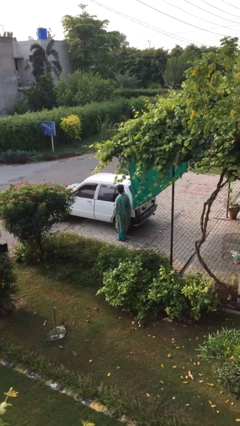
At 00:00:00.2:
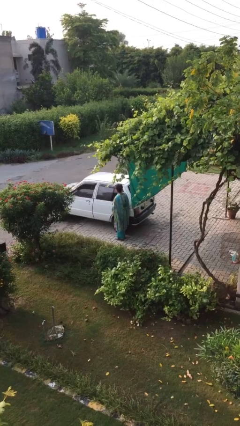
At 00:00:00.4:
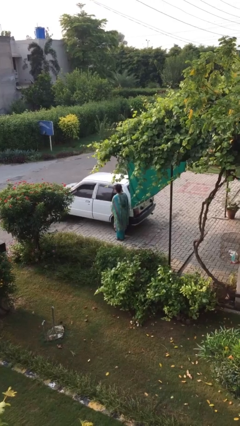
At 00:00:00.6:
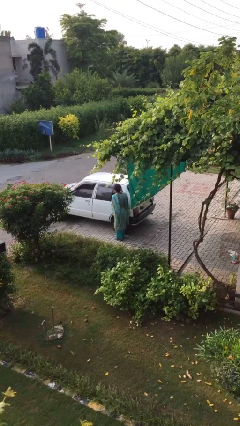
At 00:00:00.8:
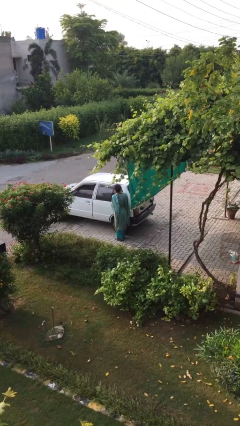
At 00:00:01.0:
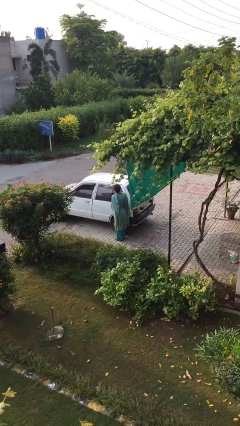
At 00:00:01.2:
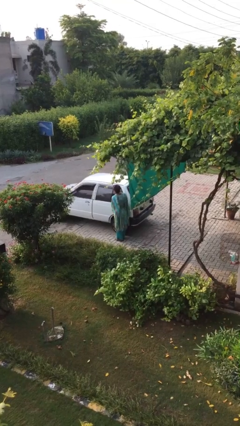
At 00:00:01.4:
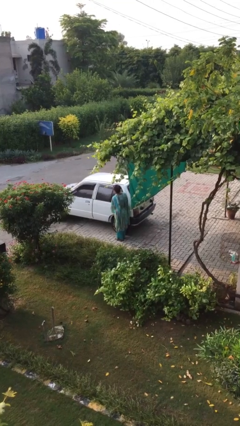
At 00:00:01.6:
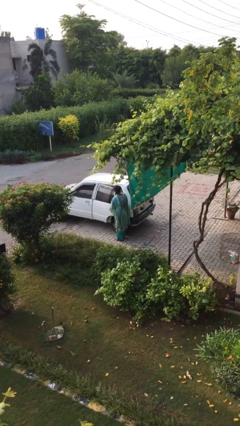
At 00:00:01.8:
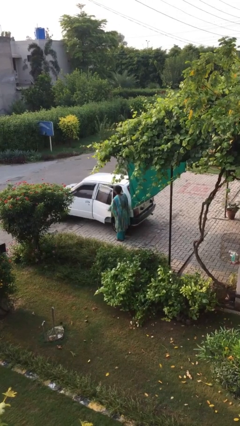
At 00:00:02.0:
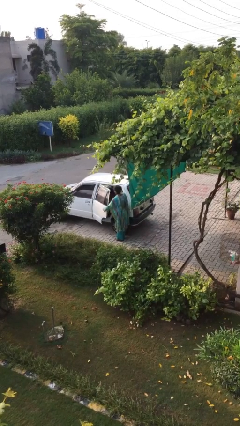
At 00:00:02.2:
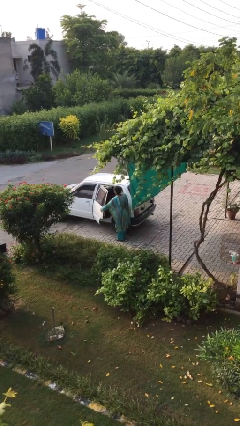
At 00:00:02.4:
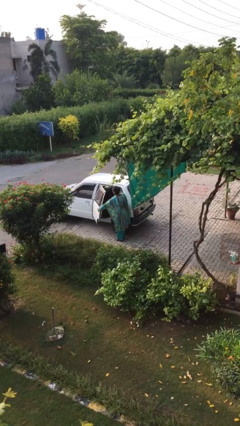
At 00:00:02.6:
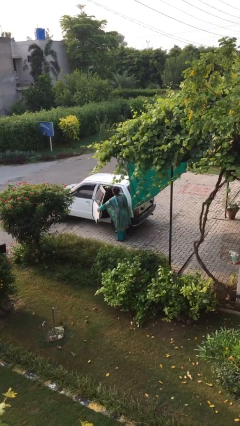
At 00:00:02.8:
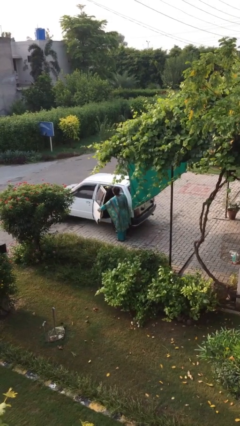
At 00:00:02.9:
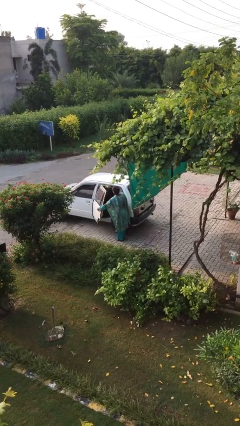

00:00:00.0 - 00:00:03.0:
person opens car door

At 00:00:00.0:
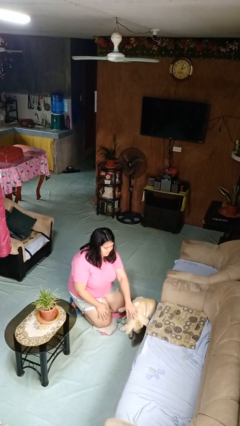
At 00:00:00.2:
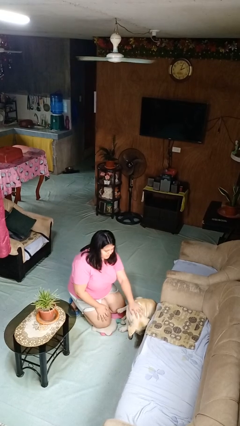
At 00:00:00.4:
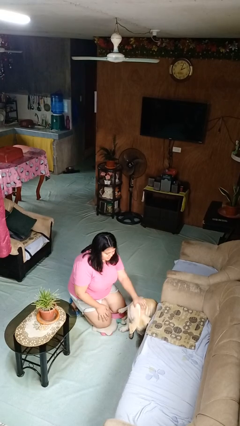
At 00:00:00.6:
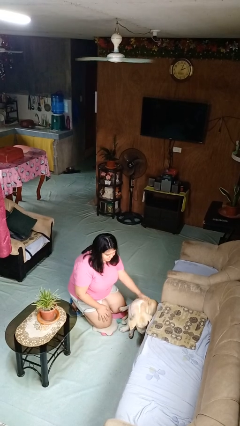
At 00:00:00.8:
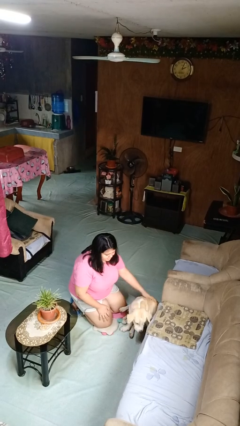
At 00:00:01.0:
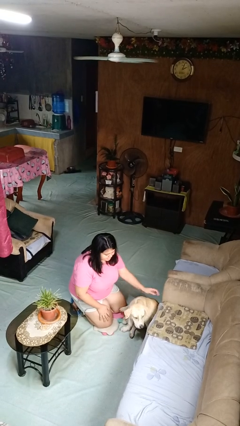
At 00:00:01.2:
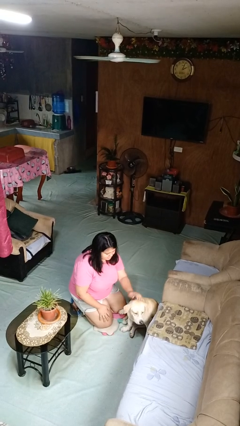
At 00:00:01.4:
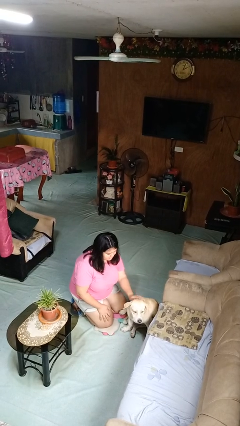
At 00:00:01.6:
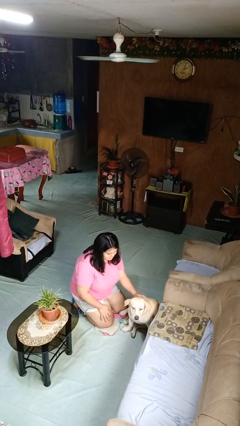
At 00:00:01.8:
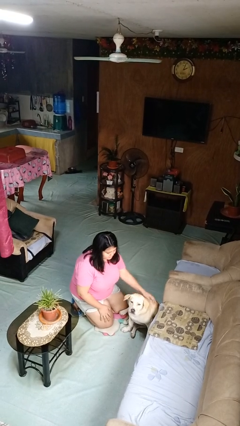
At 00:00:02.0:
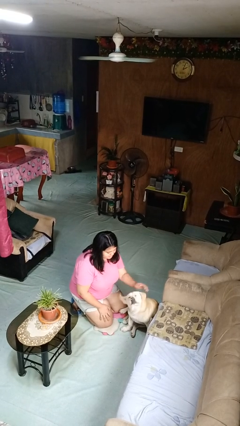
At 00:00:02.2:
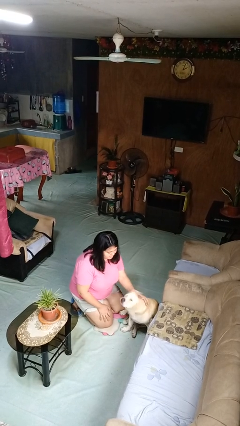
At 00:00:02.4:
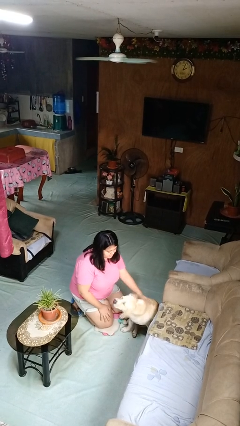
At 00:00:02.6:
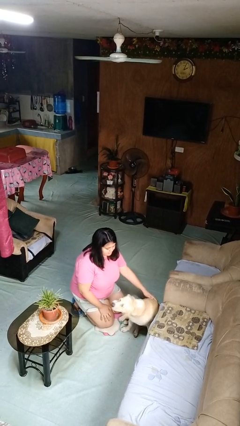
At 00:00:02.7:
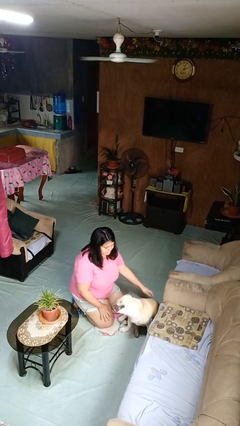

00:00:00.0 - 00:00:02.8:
person pets dog

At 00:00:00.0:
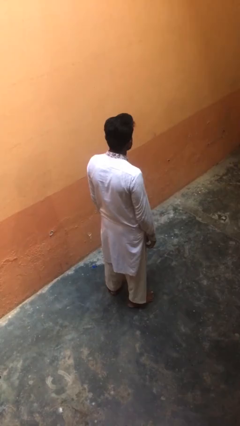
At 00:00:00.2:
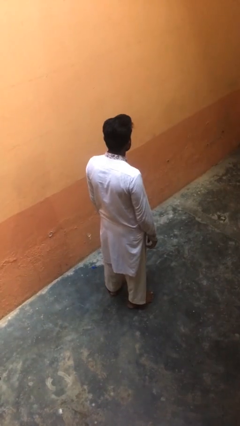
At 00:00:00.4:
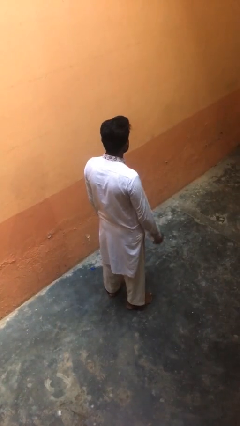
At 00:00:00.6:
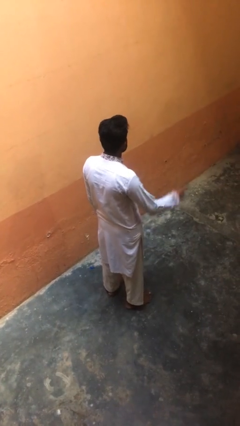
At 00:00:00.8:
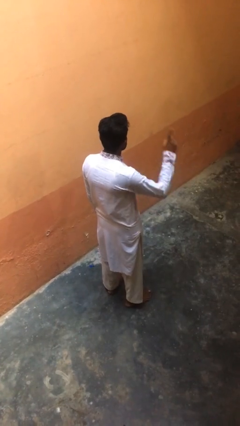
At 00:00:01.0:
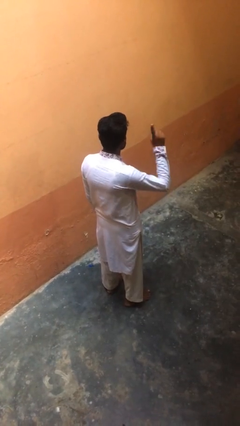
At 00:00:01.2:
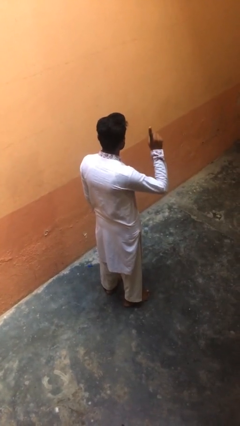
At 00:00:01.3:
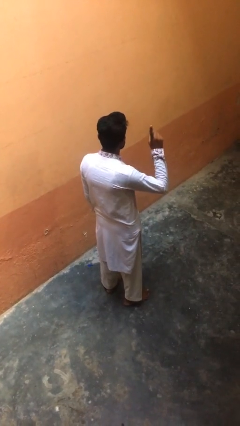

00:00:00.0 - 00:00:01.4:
person gestures number one

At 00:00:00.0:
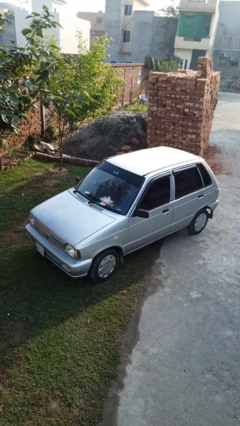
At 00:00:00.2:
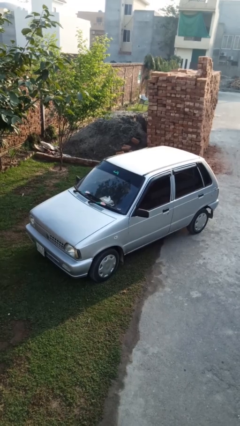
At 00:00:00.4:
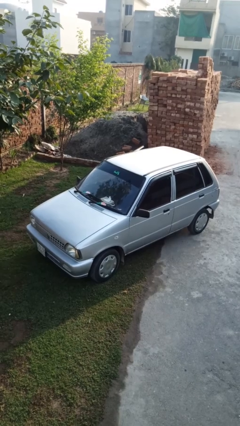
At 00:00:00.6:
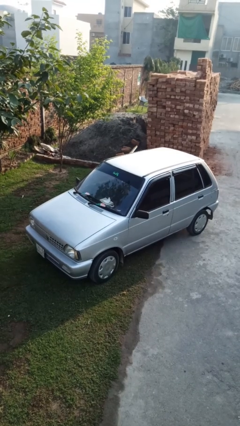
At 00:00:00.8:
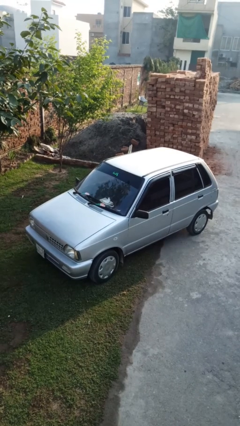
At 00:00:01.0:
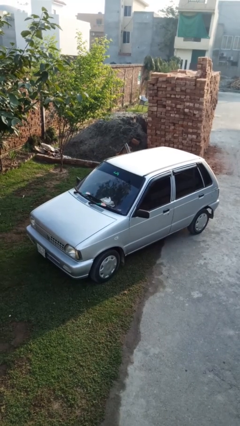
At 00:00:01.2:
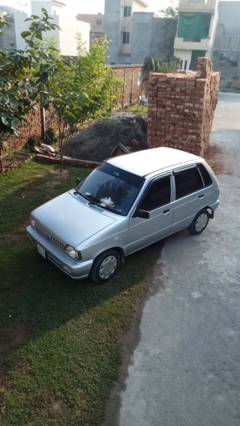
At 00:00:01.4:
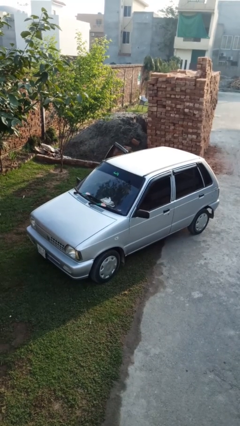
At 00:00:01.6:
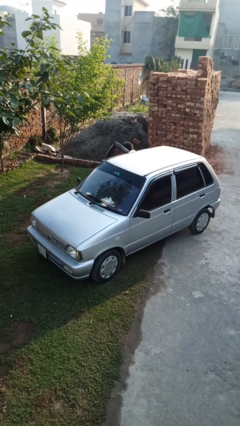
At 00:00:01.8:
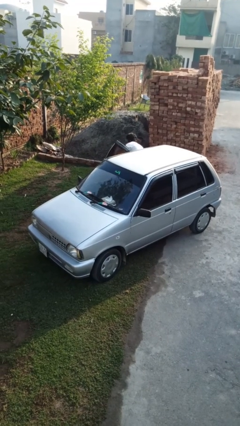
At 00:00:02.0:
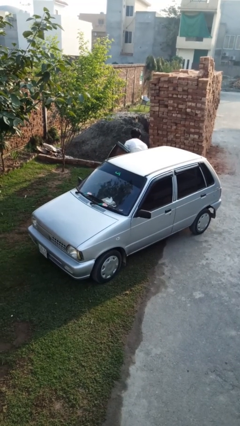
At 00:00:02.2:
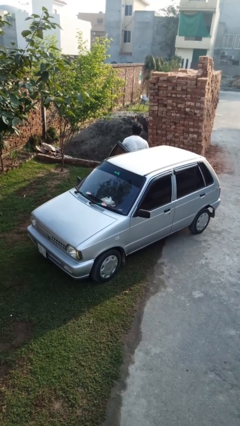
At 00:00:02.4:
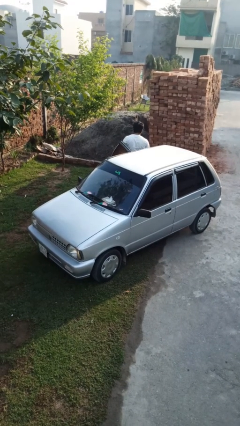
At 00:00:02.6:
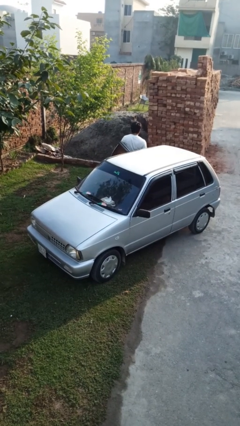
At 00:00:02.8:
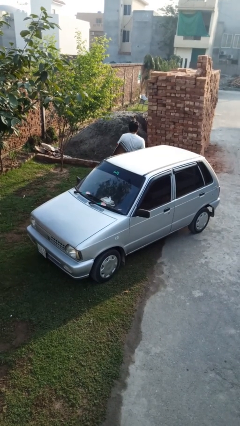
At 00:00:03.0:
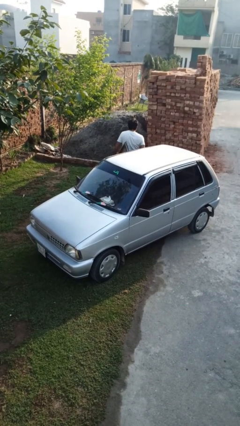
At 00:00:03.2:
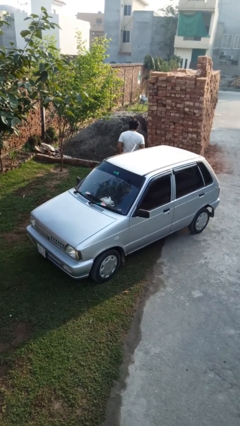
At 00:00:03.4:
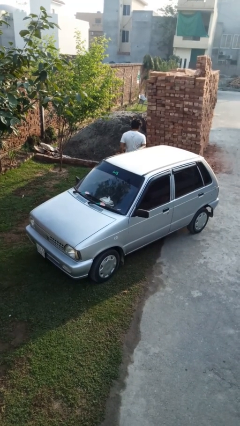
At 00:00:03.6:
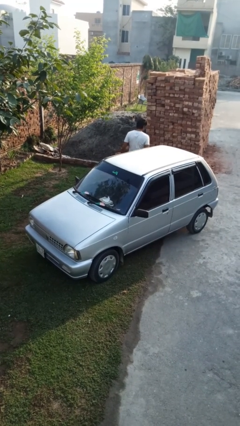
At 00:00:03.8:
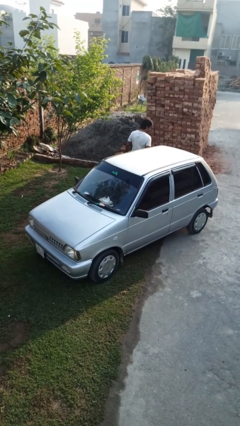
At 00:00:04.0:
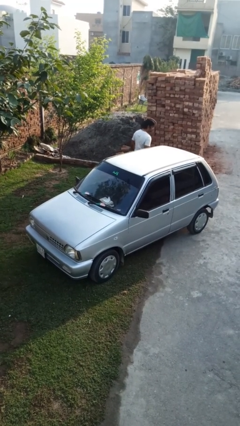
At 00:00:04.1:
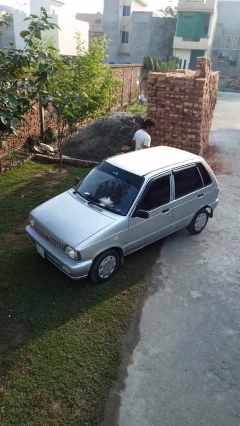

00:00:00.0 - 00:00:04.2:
car drops off person

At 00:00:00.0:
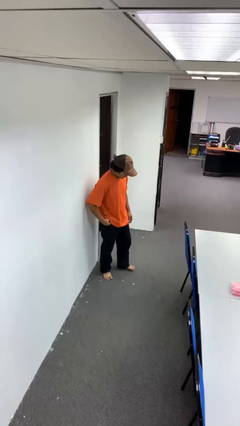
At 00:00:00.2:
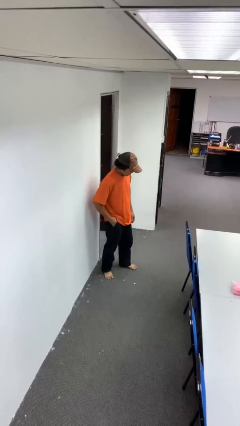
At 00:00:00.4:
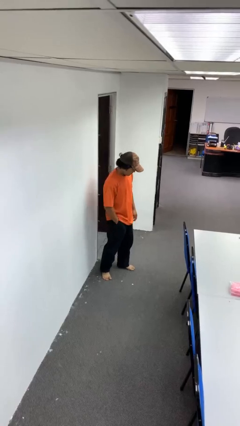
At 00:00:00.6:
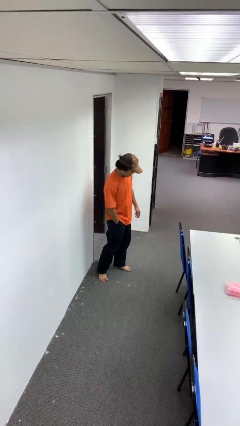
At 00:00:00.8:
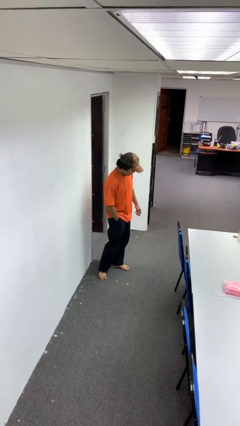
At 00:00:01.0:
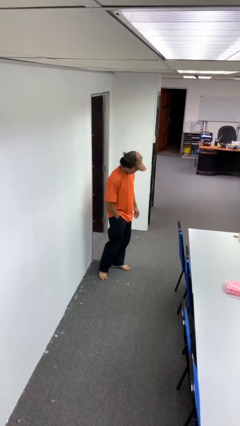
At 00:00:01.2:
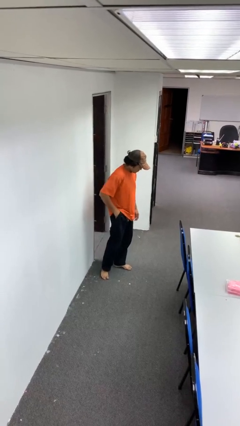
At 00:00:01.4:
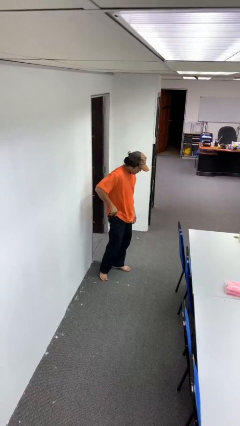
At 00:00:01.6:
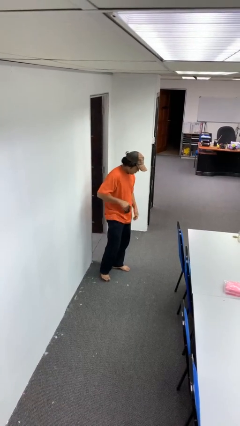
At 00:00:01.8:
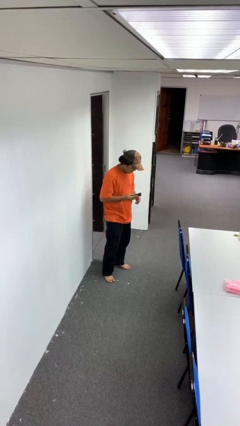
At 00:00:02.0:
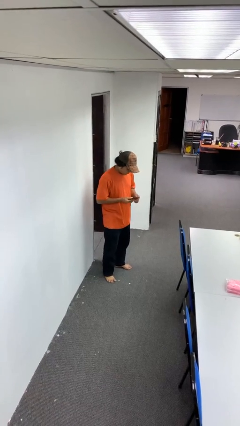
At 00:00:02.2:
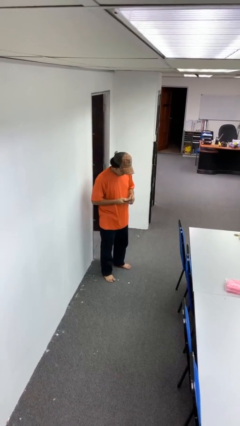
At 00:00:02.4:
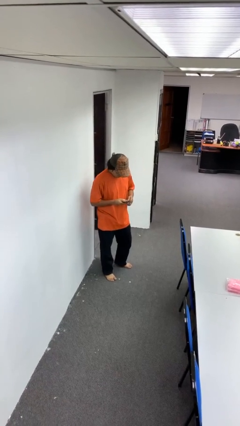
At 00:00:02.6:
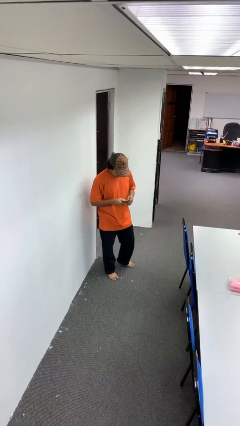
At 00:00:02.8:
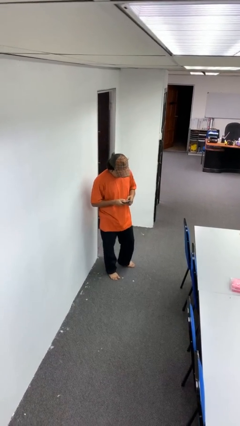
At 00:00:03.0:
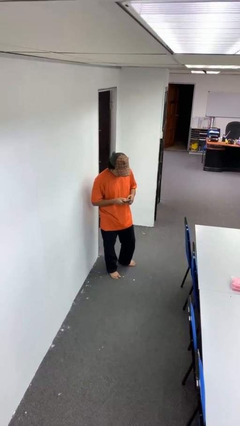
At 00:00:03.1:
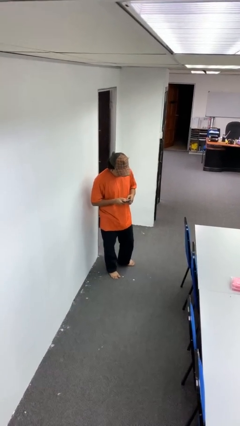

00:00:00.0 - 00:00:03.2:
person takes phone from pocket

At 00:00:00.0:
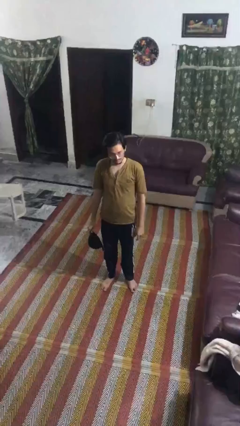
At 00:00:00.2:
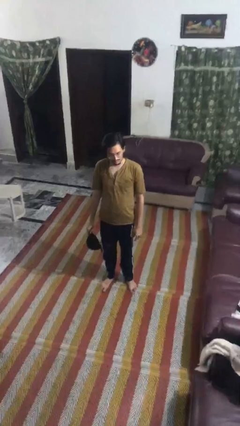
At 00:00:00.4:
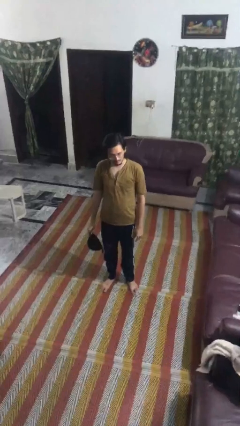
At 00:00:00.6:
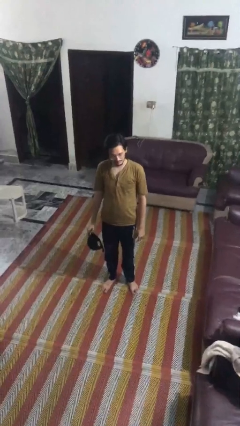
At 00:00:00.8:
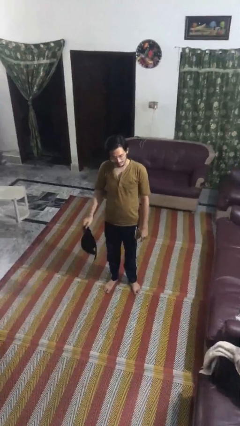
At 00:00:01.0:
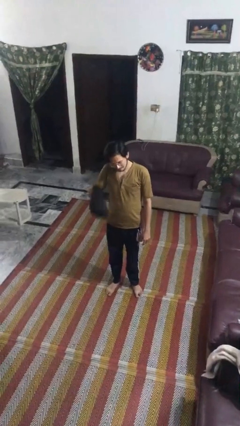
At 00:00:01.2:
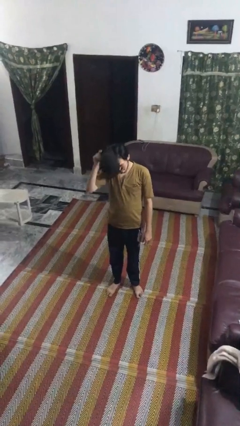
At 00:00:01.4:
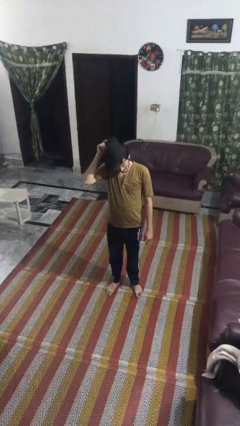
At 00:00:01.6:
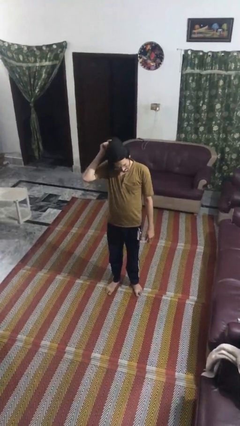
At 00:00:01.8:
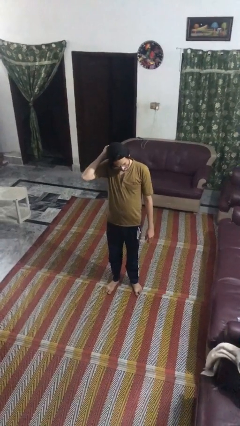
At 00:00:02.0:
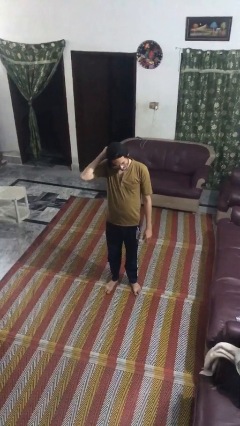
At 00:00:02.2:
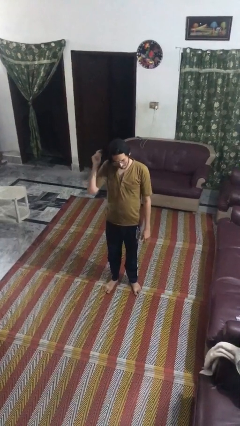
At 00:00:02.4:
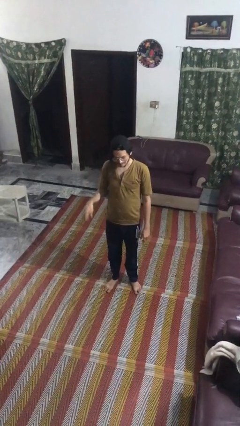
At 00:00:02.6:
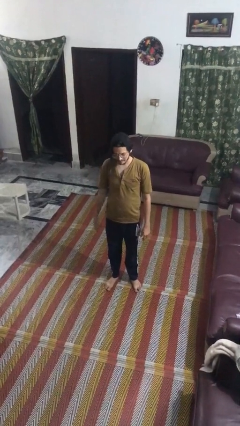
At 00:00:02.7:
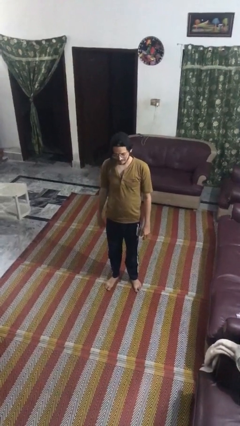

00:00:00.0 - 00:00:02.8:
person puts on hat

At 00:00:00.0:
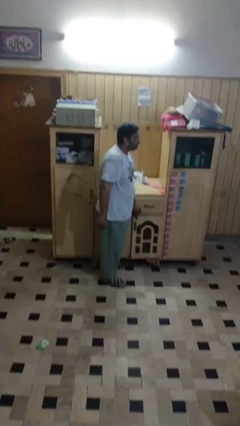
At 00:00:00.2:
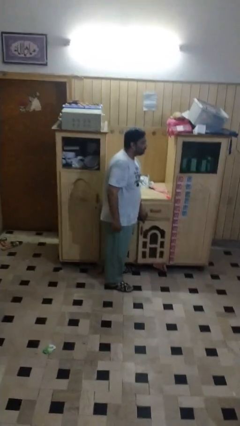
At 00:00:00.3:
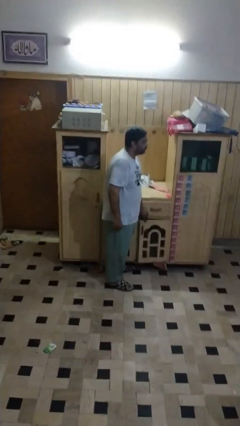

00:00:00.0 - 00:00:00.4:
person closes cabinet
